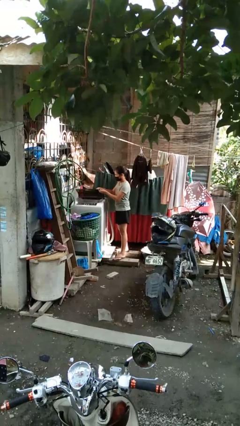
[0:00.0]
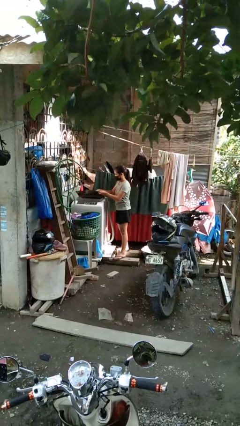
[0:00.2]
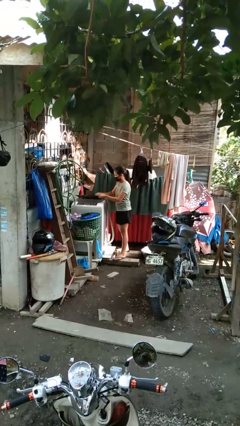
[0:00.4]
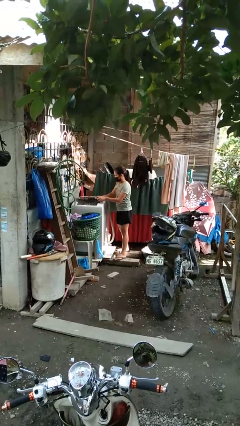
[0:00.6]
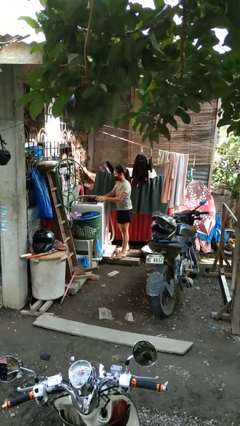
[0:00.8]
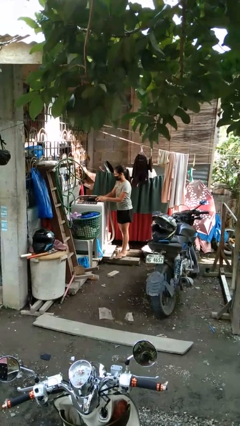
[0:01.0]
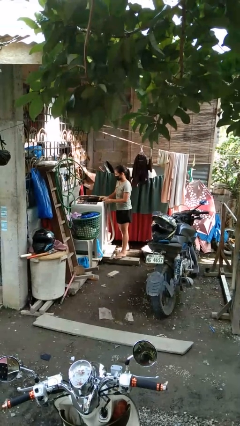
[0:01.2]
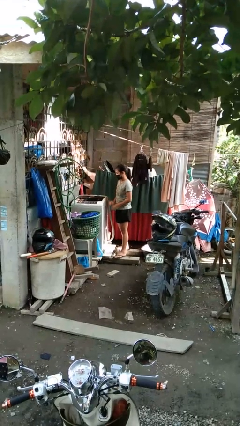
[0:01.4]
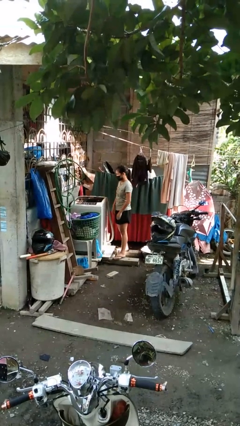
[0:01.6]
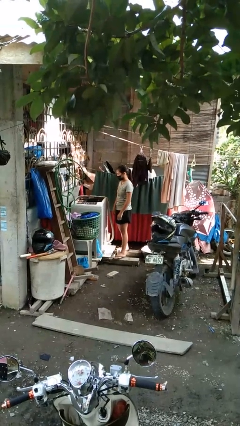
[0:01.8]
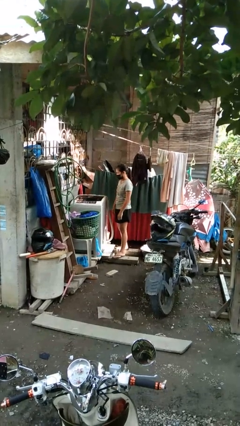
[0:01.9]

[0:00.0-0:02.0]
person closes clothes washer

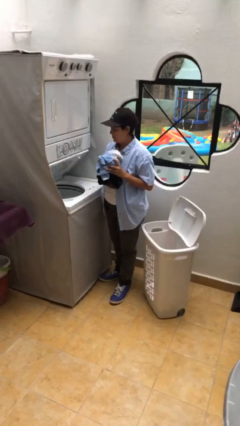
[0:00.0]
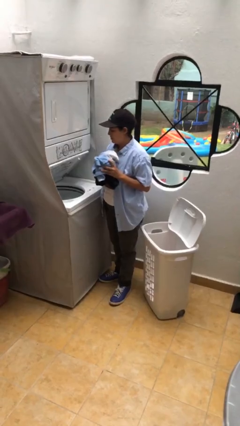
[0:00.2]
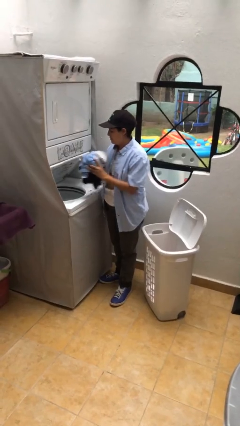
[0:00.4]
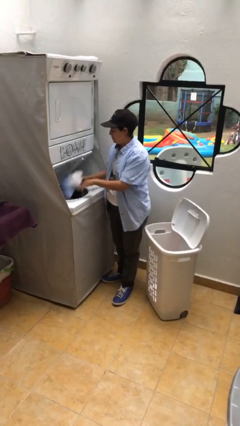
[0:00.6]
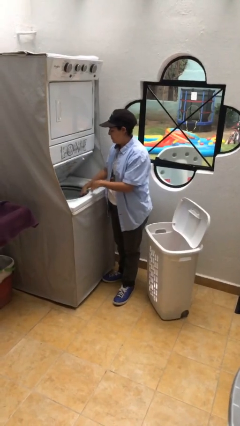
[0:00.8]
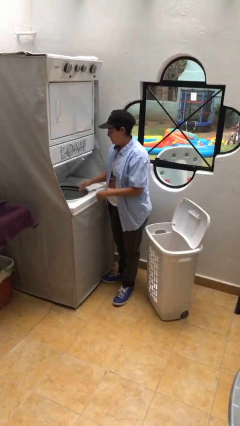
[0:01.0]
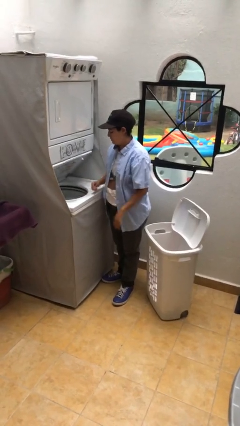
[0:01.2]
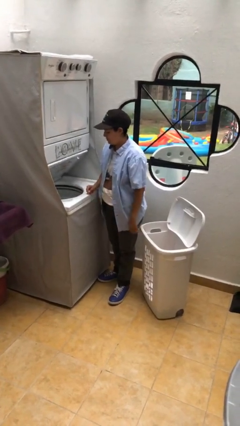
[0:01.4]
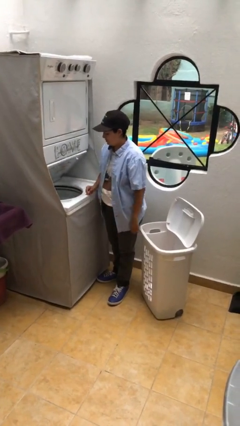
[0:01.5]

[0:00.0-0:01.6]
person loads clotheswasher

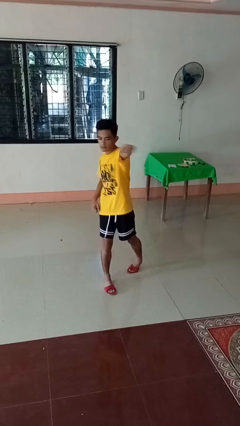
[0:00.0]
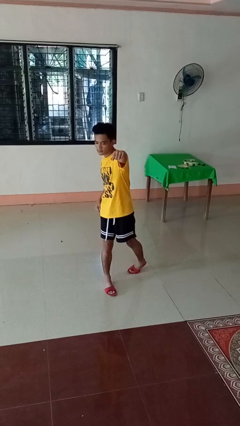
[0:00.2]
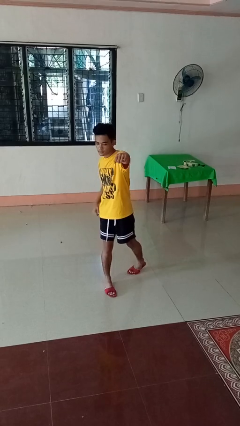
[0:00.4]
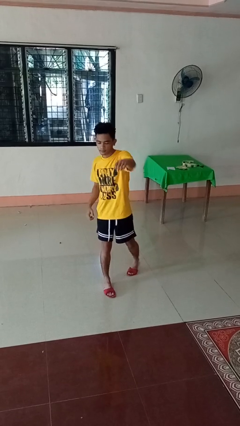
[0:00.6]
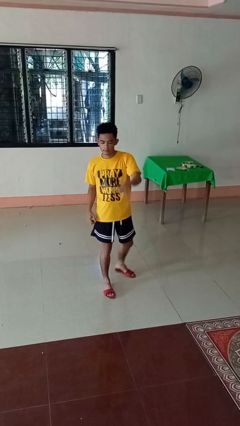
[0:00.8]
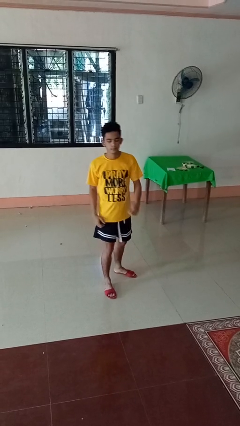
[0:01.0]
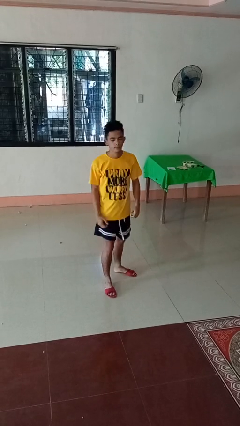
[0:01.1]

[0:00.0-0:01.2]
person punches

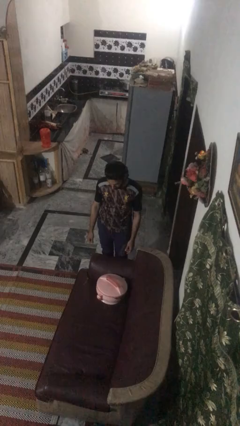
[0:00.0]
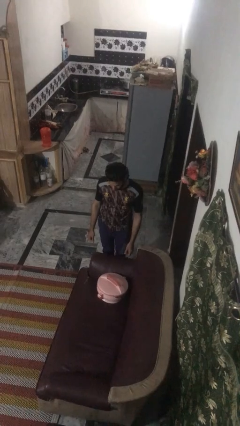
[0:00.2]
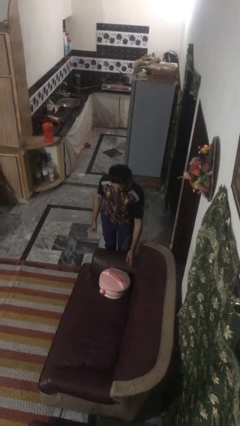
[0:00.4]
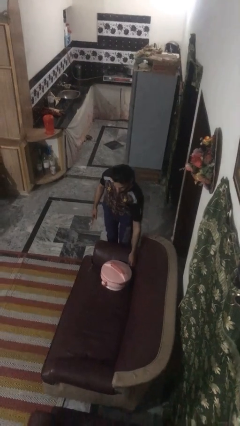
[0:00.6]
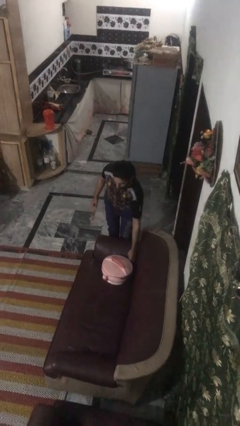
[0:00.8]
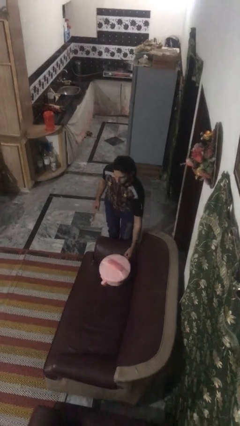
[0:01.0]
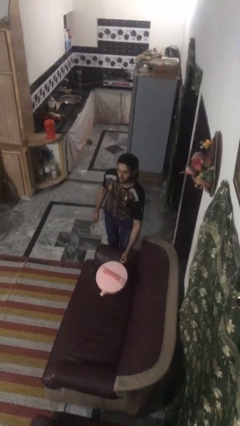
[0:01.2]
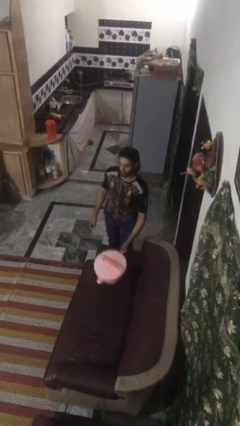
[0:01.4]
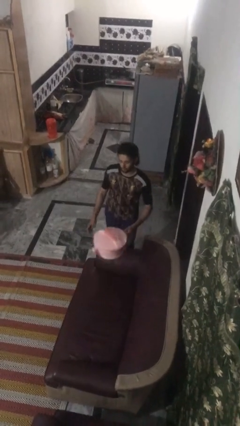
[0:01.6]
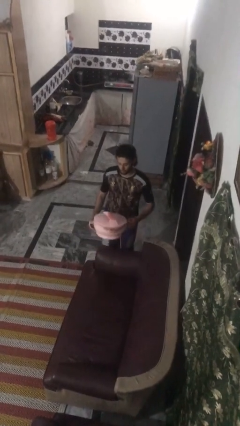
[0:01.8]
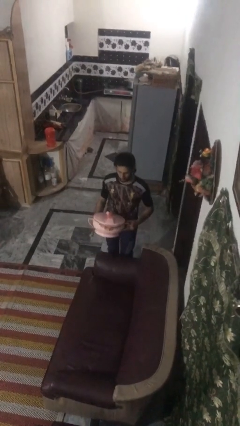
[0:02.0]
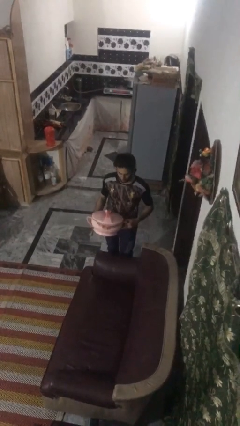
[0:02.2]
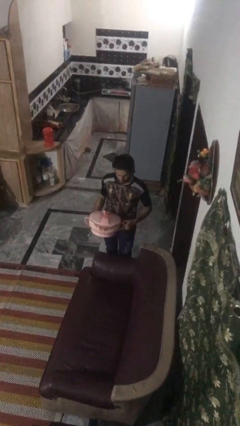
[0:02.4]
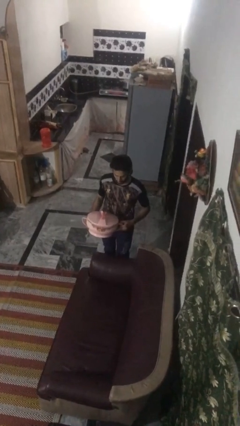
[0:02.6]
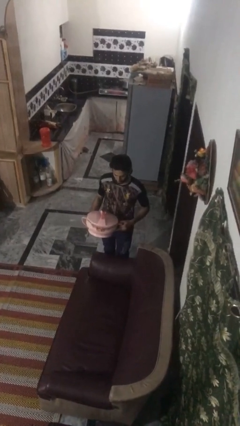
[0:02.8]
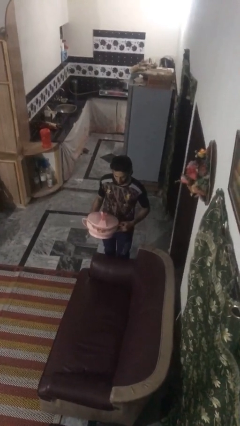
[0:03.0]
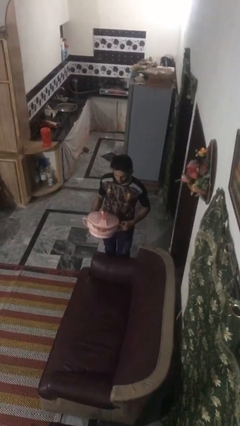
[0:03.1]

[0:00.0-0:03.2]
person picks up object from couch

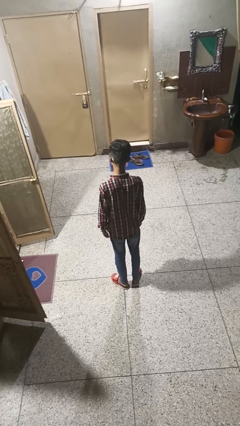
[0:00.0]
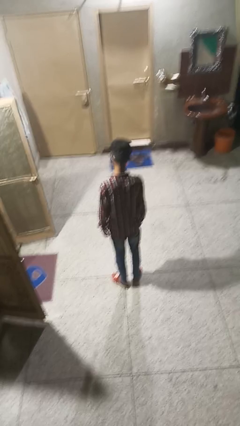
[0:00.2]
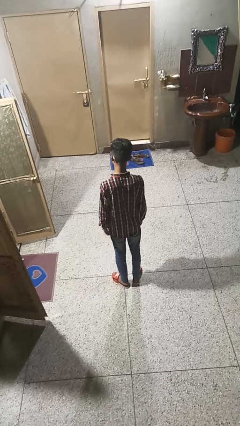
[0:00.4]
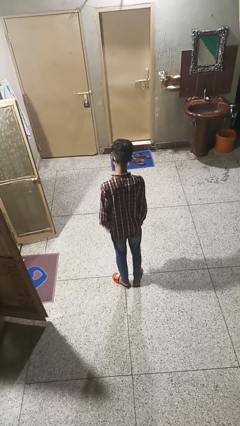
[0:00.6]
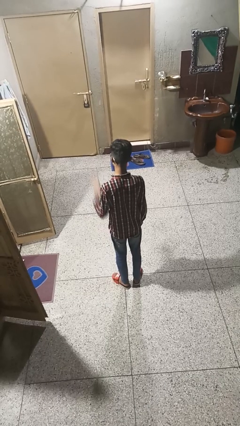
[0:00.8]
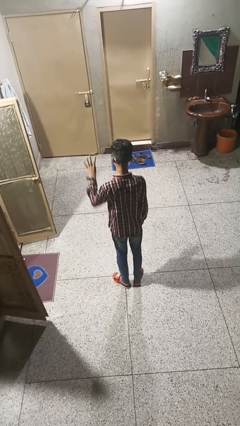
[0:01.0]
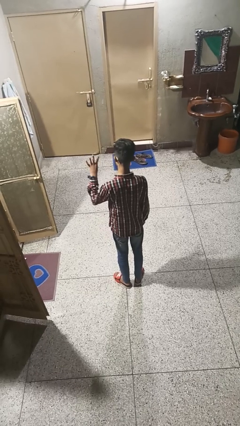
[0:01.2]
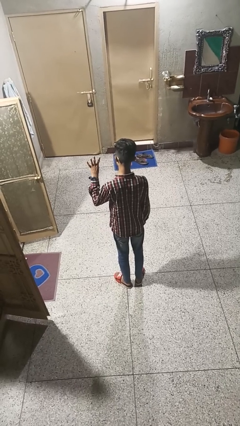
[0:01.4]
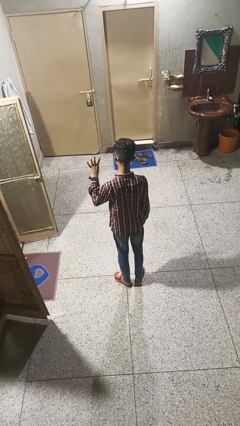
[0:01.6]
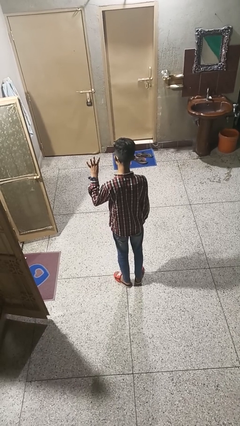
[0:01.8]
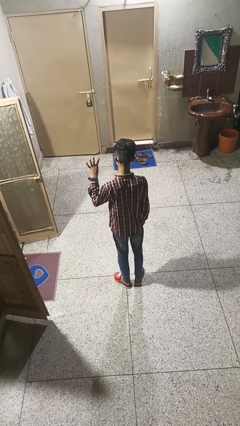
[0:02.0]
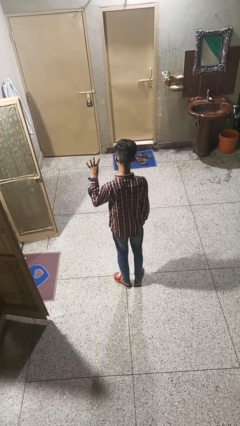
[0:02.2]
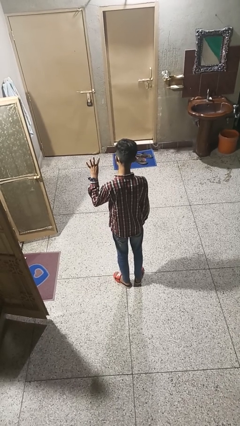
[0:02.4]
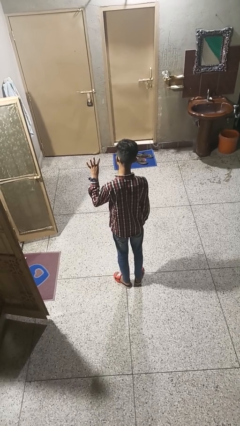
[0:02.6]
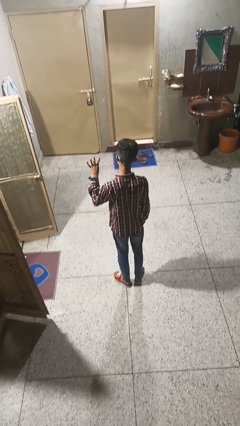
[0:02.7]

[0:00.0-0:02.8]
person gestures number four

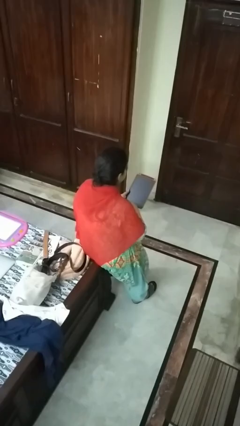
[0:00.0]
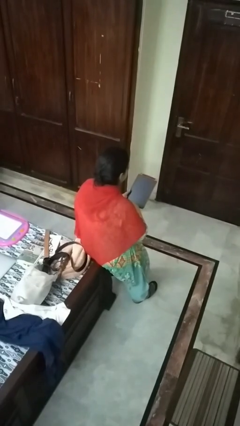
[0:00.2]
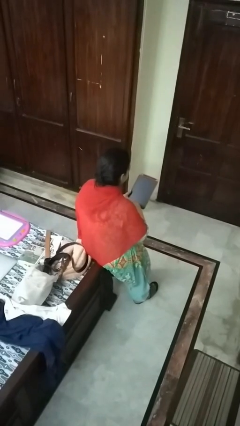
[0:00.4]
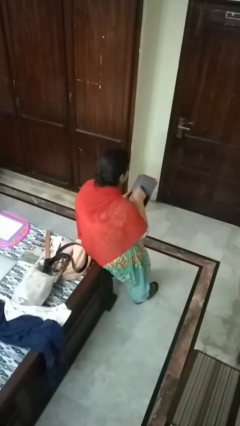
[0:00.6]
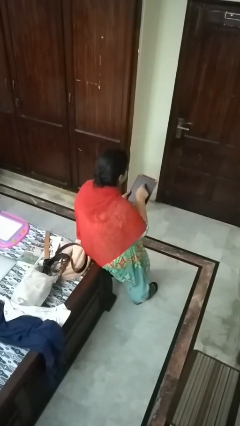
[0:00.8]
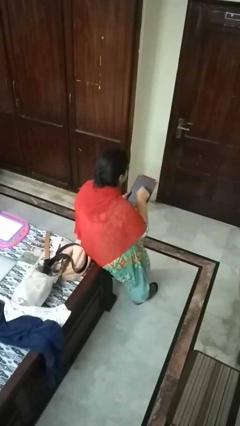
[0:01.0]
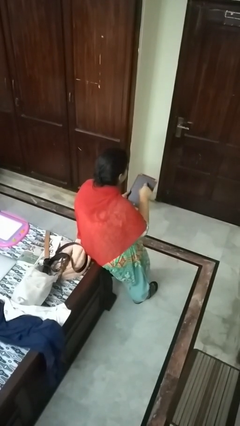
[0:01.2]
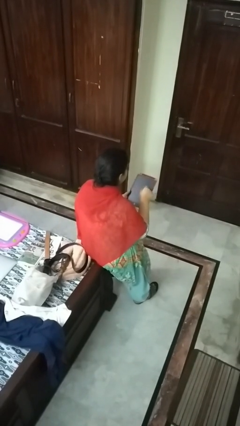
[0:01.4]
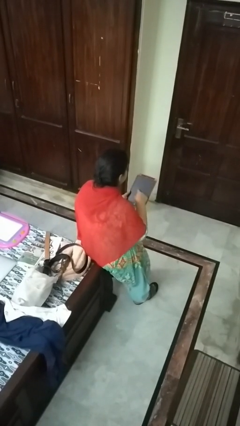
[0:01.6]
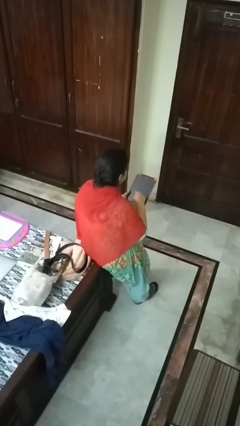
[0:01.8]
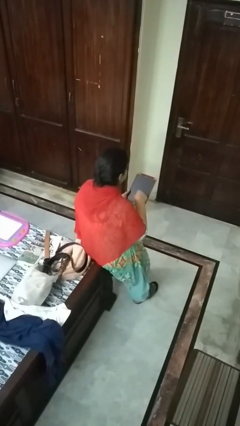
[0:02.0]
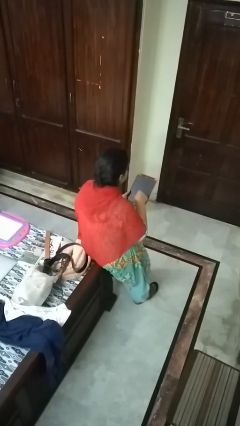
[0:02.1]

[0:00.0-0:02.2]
person interacts with tablet

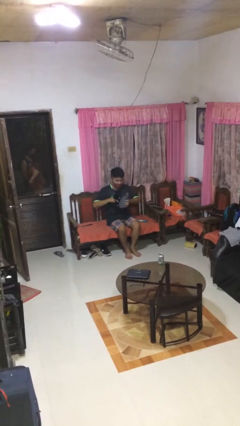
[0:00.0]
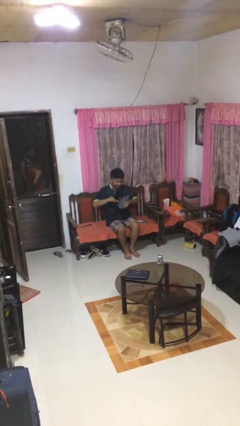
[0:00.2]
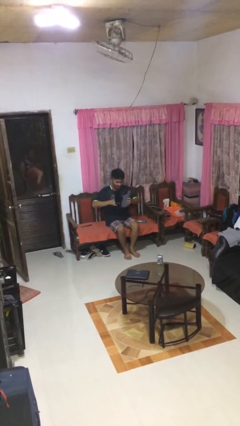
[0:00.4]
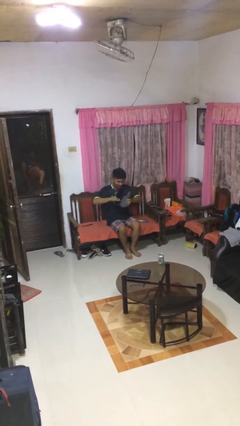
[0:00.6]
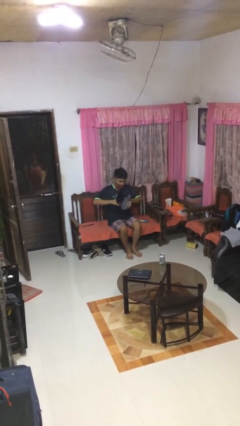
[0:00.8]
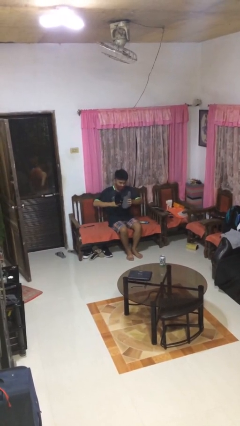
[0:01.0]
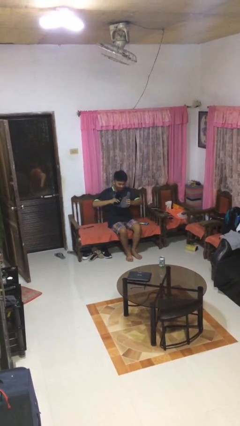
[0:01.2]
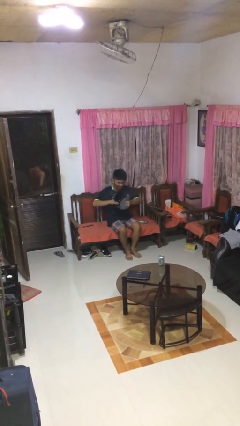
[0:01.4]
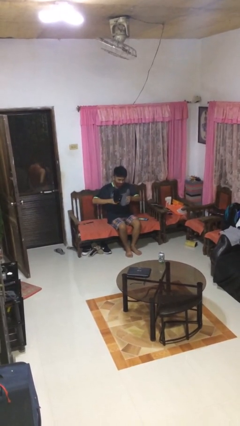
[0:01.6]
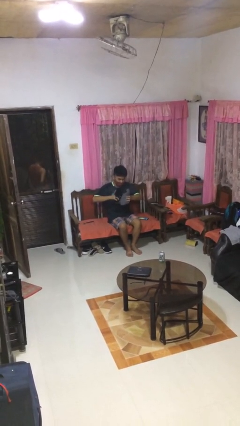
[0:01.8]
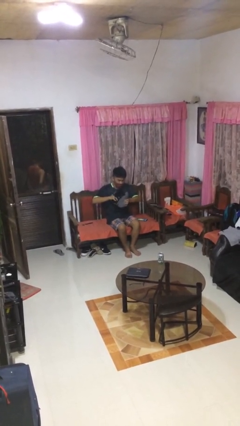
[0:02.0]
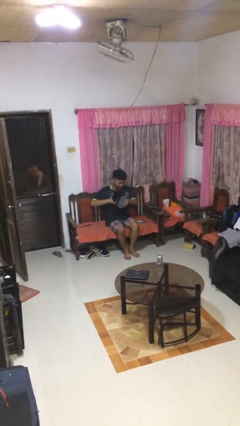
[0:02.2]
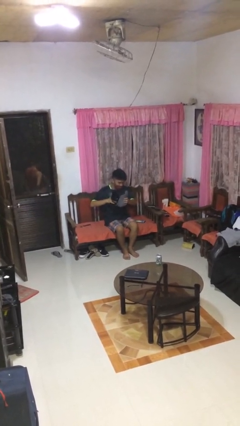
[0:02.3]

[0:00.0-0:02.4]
person squeezes object

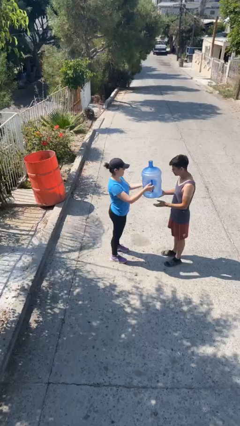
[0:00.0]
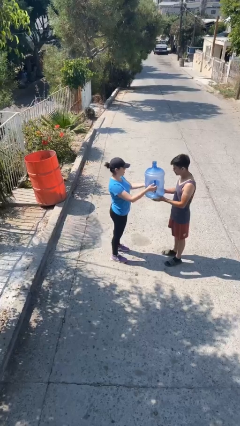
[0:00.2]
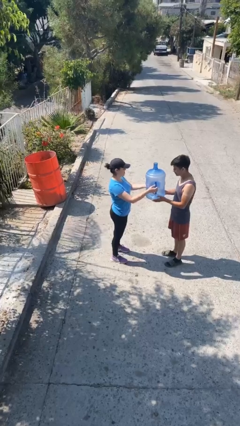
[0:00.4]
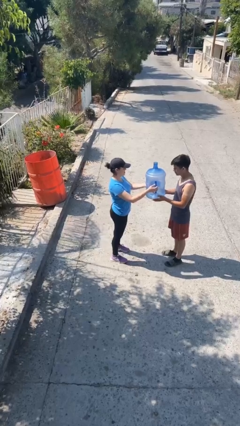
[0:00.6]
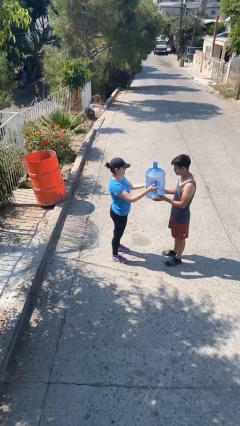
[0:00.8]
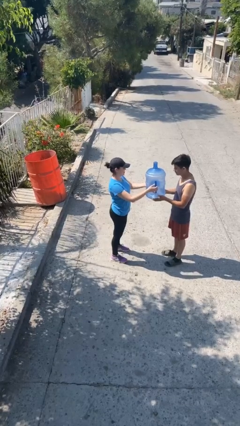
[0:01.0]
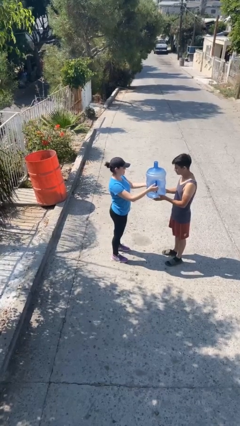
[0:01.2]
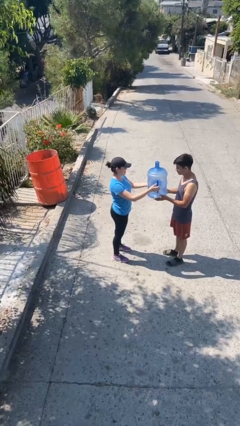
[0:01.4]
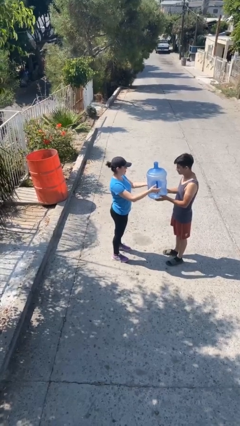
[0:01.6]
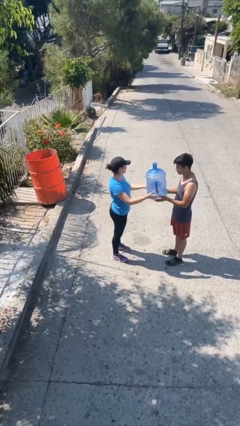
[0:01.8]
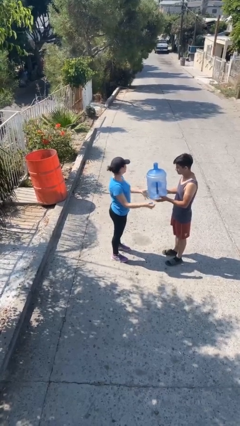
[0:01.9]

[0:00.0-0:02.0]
person transfers object to person
